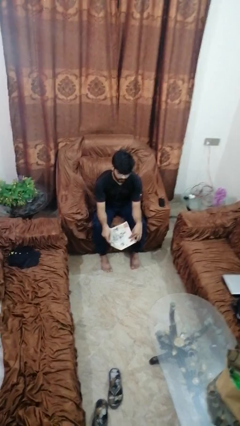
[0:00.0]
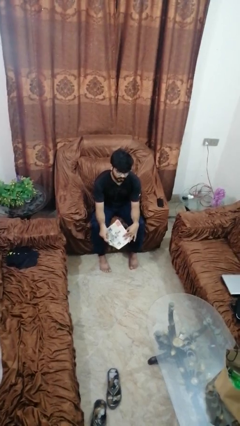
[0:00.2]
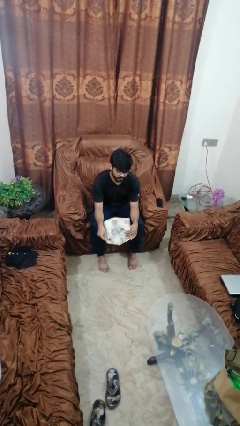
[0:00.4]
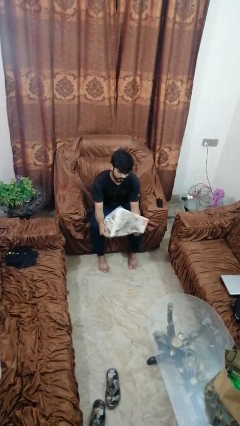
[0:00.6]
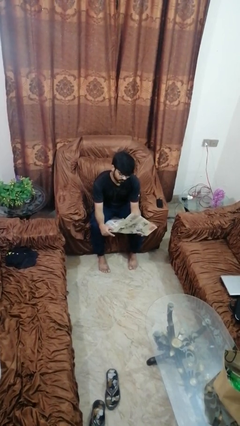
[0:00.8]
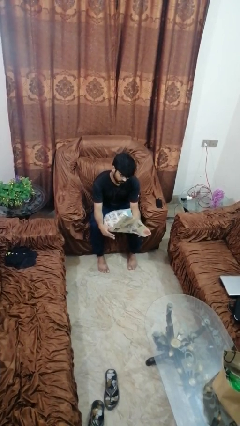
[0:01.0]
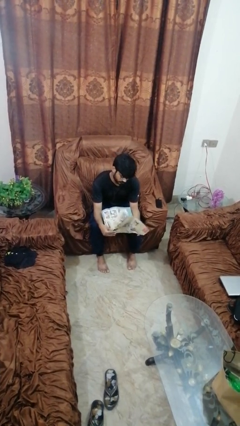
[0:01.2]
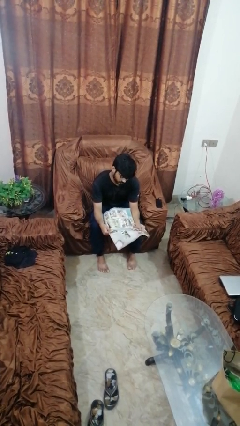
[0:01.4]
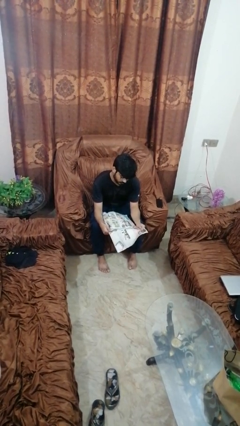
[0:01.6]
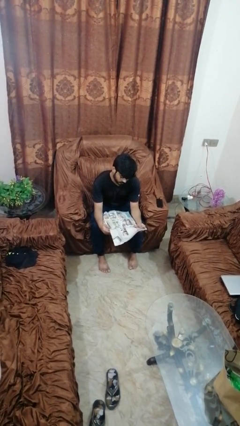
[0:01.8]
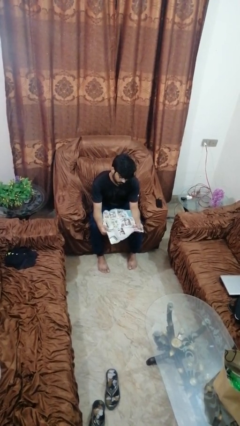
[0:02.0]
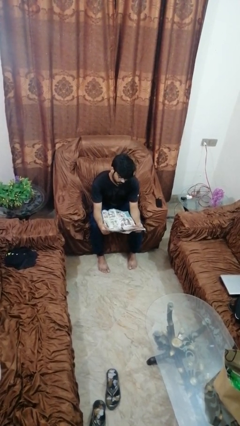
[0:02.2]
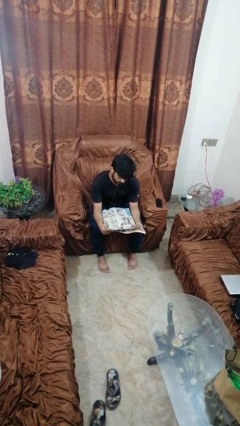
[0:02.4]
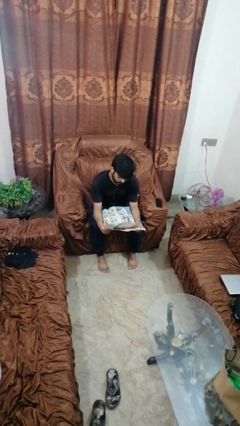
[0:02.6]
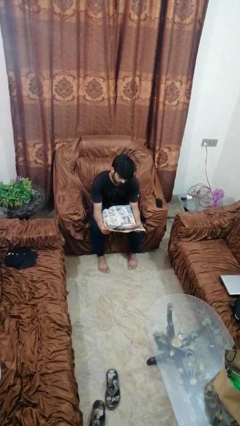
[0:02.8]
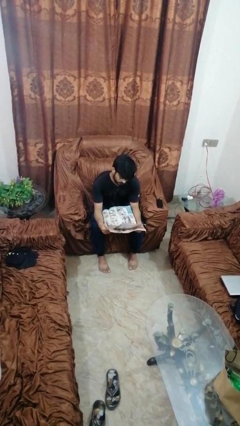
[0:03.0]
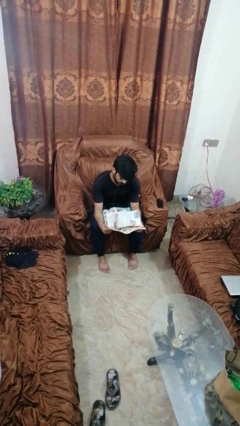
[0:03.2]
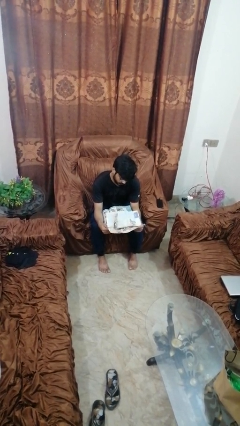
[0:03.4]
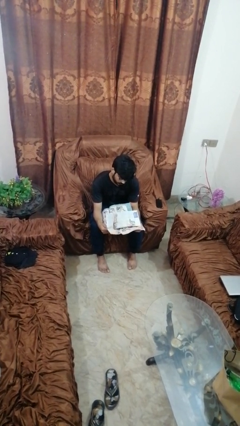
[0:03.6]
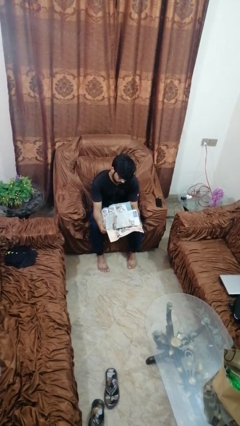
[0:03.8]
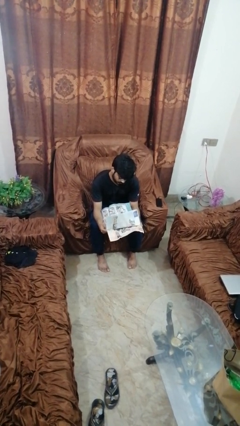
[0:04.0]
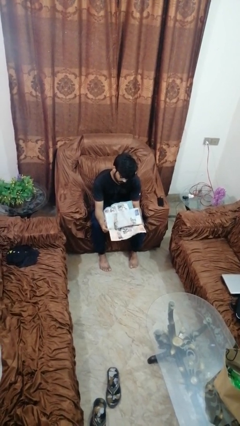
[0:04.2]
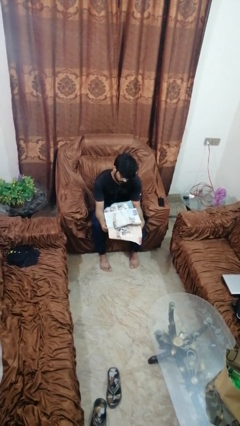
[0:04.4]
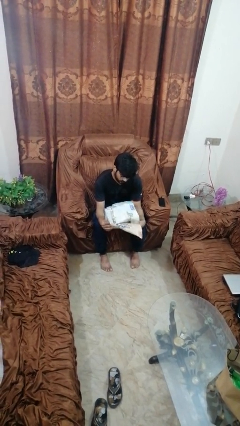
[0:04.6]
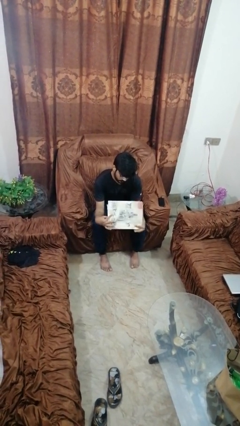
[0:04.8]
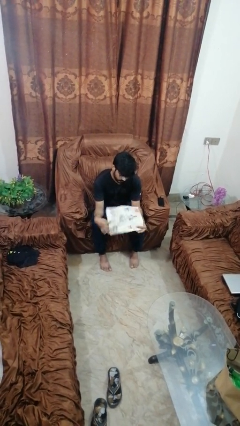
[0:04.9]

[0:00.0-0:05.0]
person reads newspaper

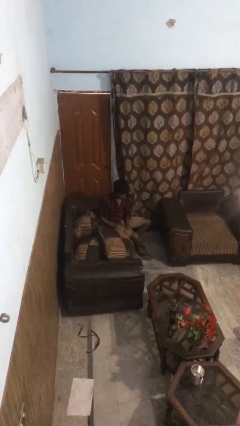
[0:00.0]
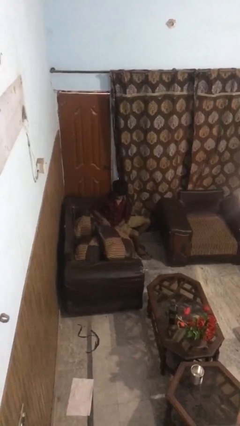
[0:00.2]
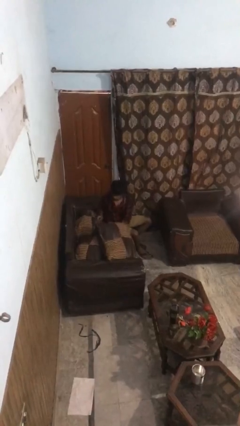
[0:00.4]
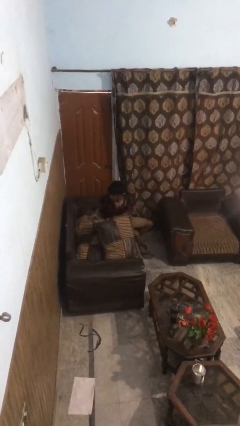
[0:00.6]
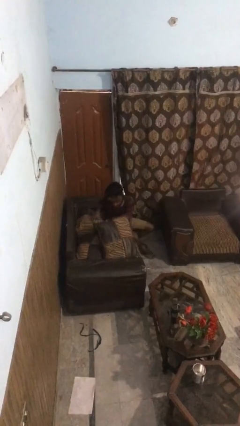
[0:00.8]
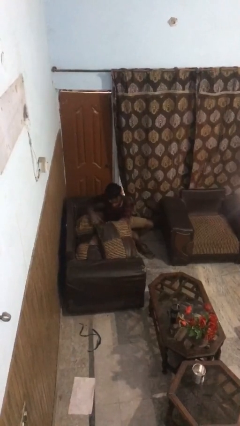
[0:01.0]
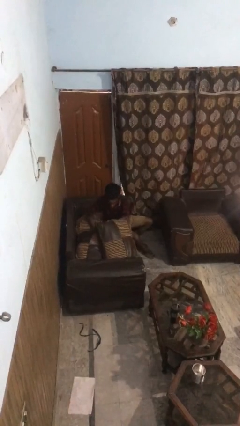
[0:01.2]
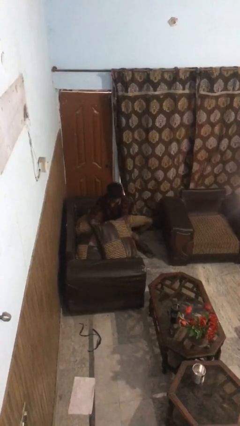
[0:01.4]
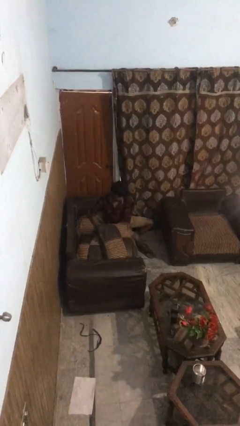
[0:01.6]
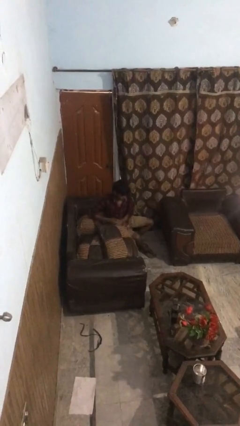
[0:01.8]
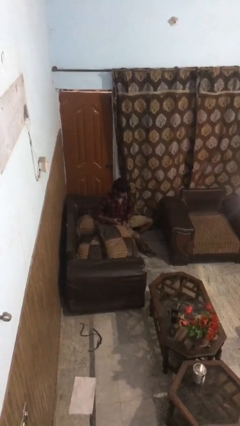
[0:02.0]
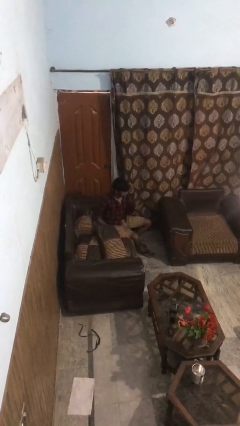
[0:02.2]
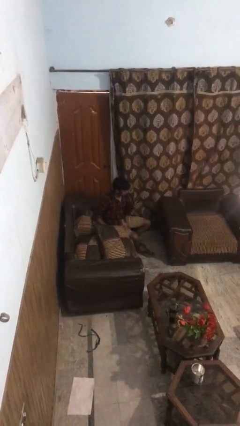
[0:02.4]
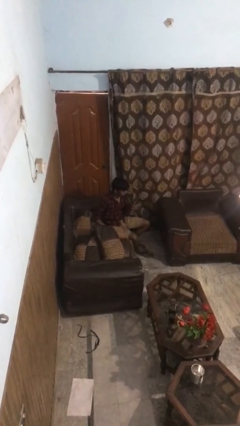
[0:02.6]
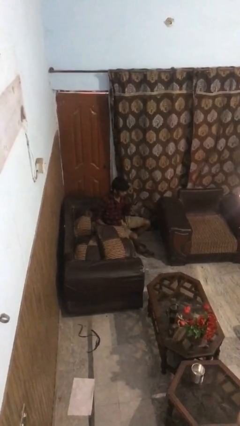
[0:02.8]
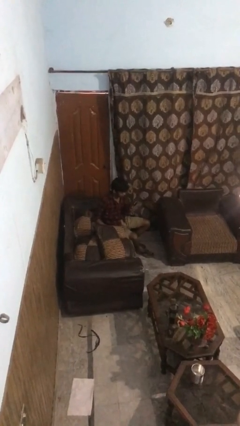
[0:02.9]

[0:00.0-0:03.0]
person searches in couch

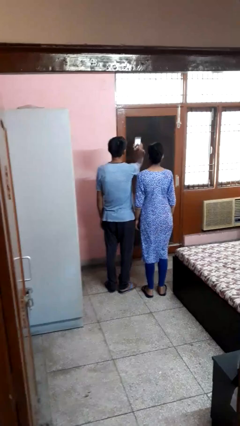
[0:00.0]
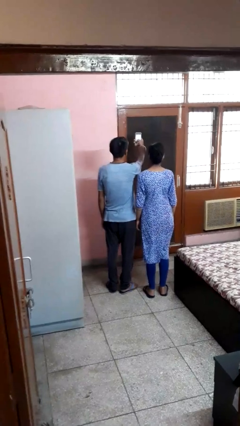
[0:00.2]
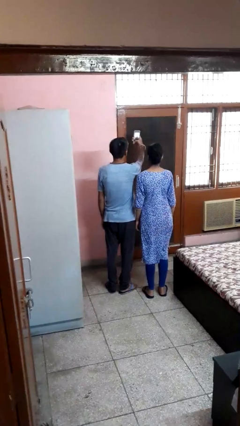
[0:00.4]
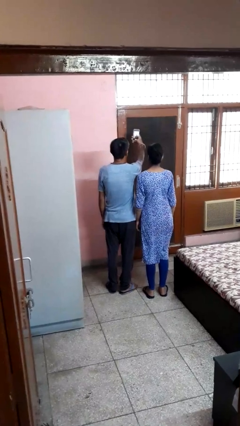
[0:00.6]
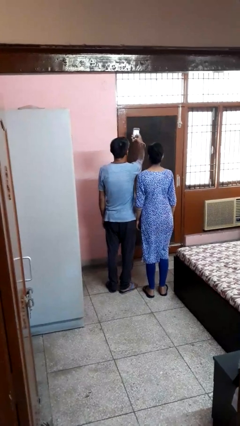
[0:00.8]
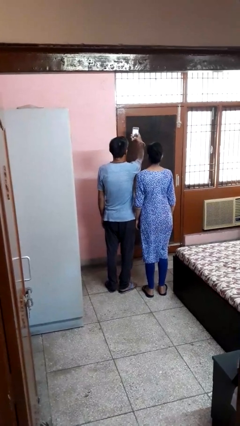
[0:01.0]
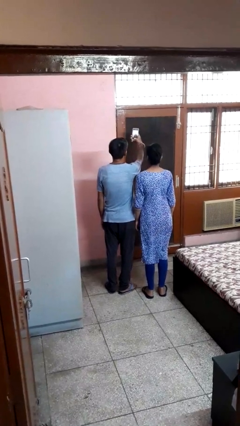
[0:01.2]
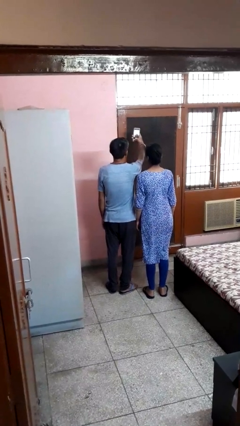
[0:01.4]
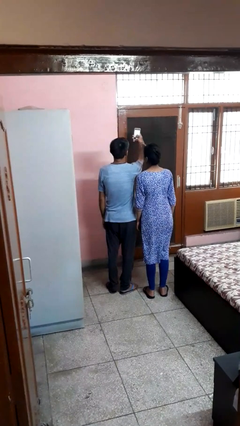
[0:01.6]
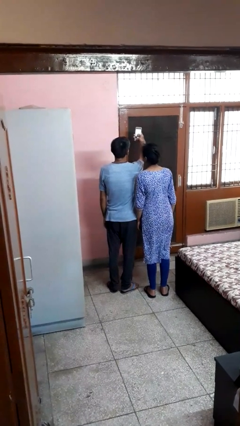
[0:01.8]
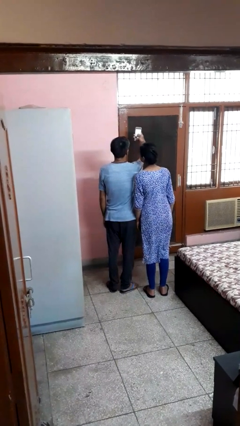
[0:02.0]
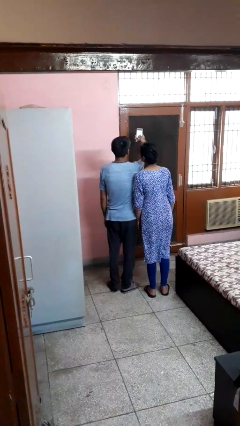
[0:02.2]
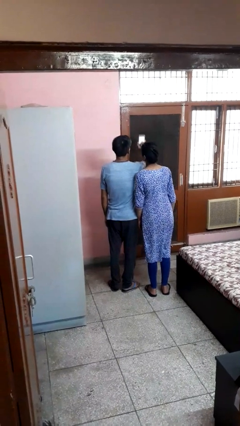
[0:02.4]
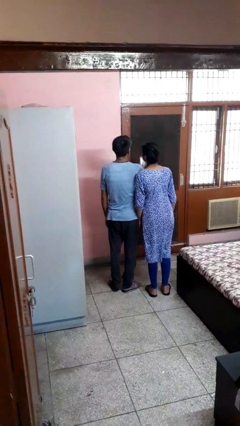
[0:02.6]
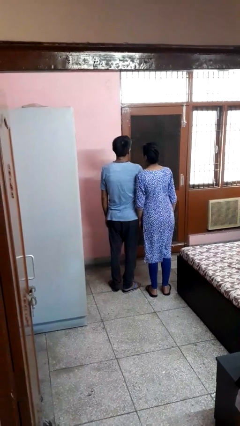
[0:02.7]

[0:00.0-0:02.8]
person takes selfie with person

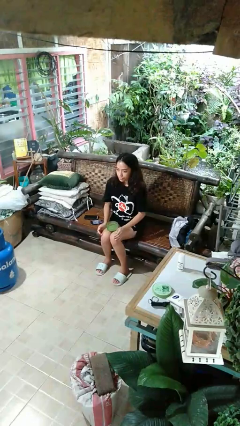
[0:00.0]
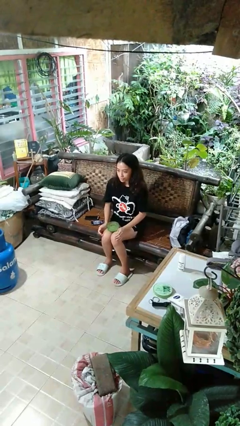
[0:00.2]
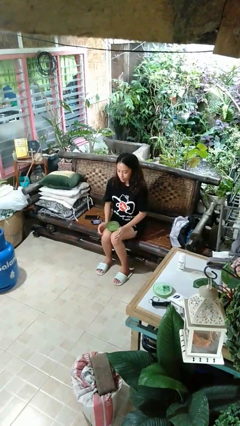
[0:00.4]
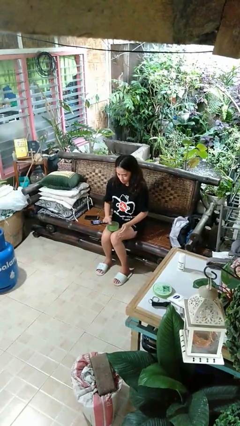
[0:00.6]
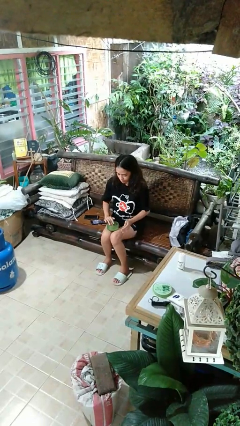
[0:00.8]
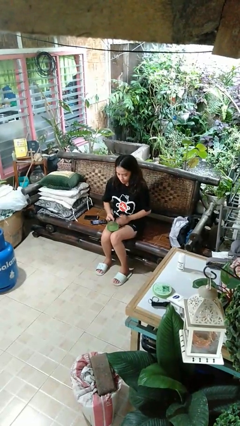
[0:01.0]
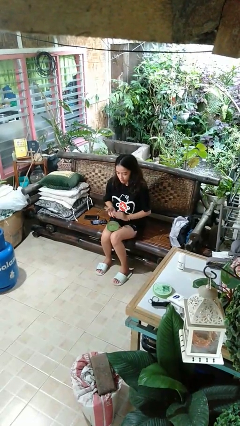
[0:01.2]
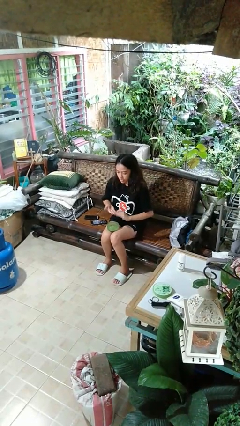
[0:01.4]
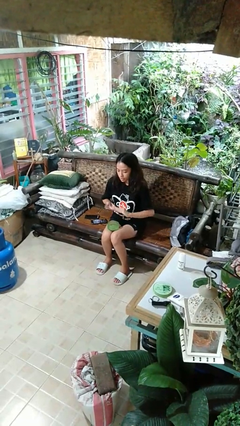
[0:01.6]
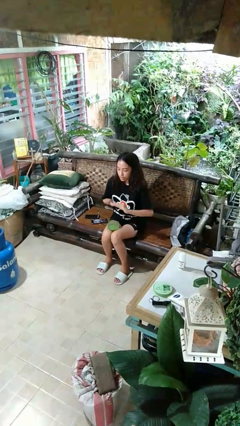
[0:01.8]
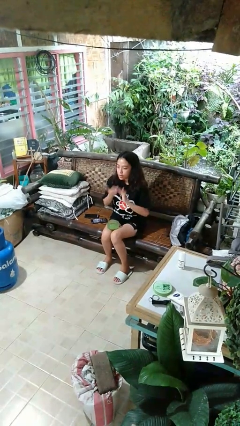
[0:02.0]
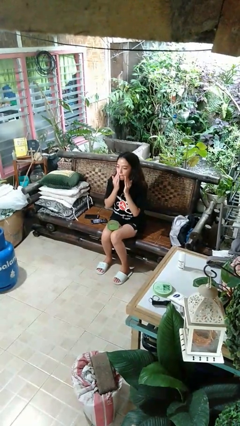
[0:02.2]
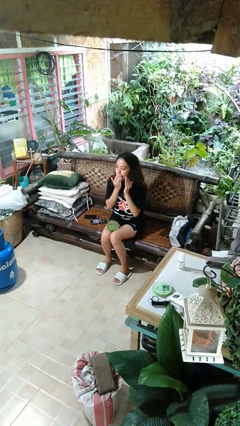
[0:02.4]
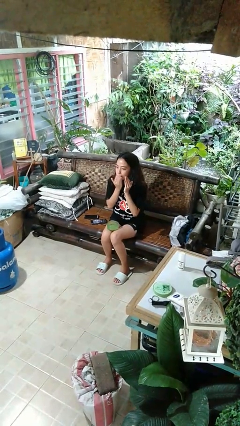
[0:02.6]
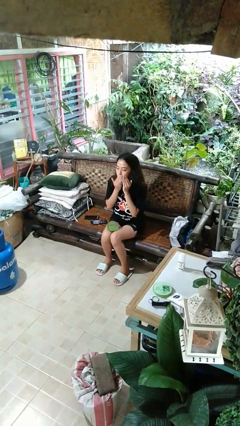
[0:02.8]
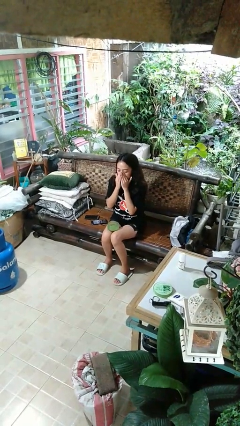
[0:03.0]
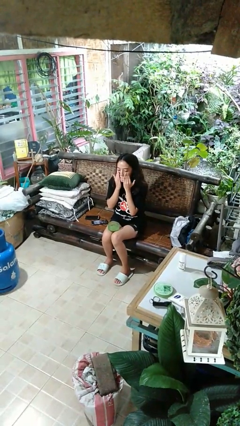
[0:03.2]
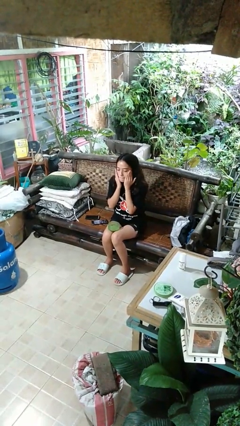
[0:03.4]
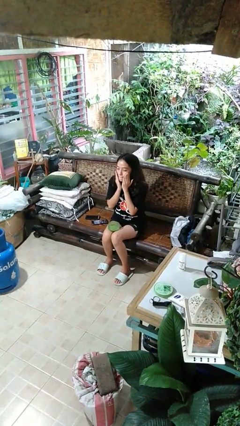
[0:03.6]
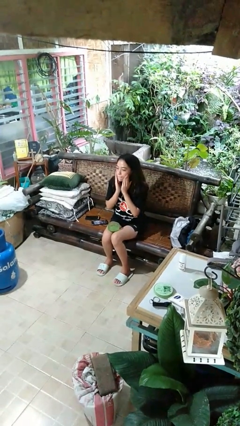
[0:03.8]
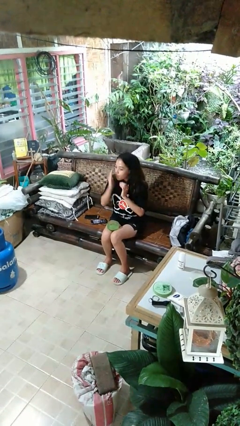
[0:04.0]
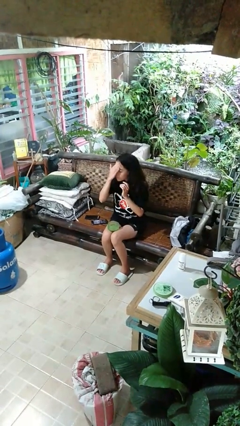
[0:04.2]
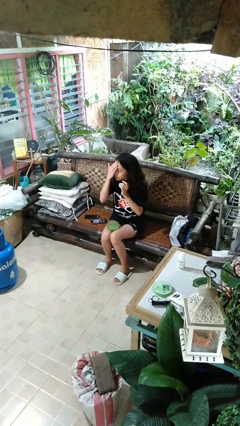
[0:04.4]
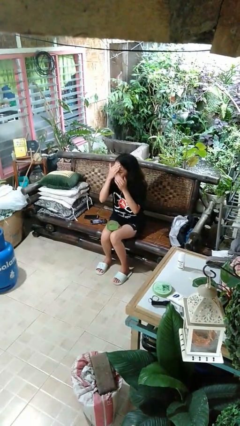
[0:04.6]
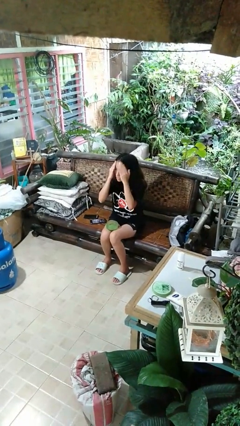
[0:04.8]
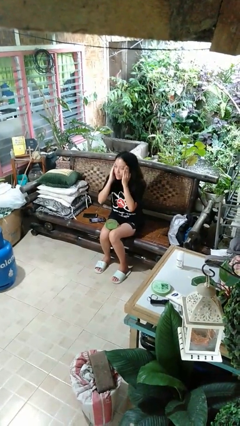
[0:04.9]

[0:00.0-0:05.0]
person applies facial moisturizer

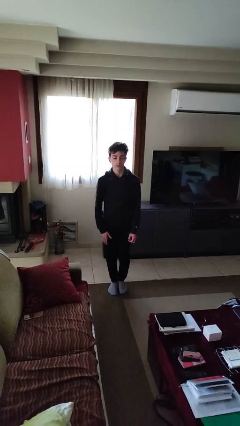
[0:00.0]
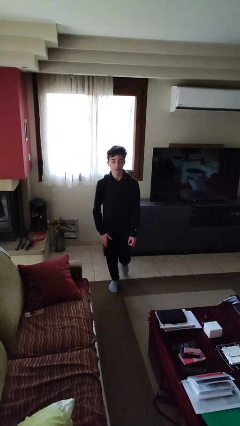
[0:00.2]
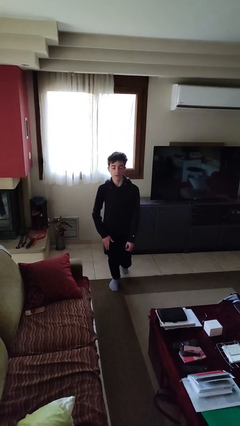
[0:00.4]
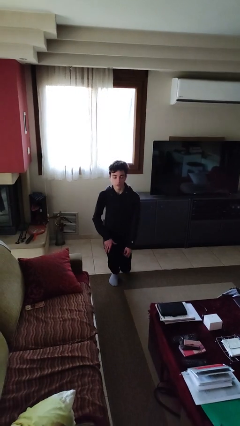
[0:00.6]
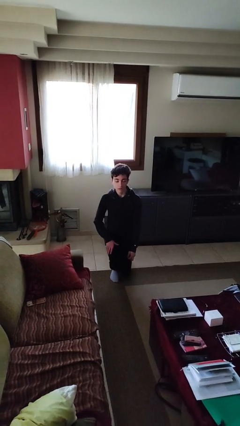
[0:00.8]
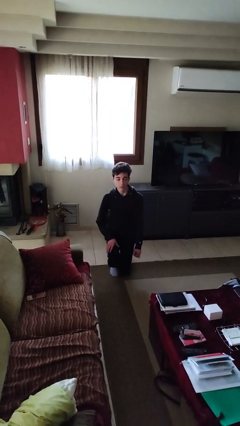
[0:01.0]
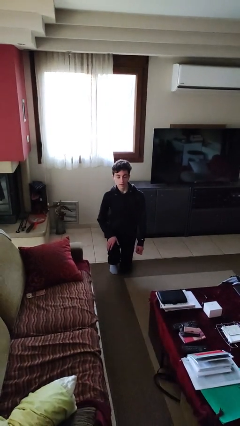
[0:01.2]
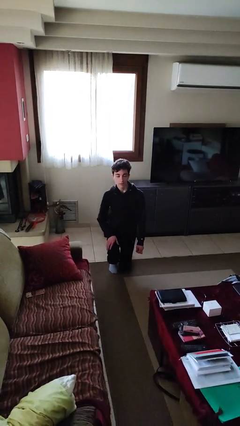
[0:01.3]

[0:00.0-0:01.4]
person kneels

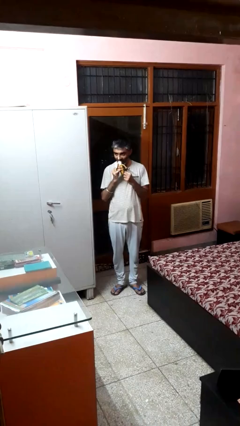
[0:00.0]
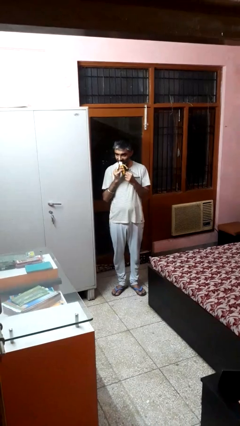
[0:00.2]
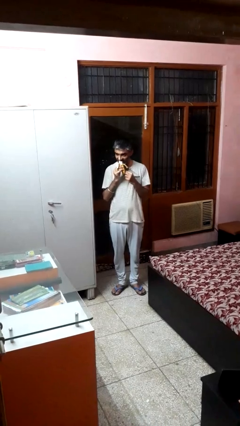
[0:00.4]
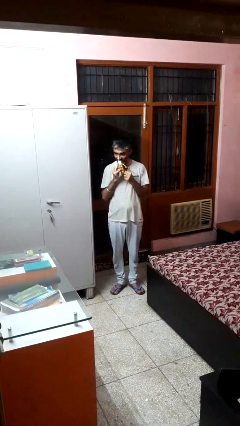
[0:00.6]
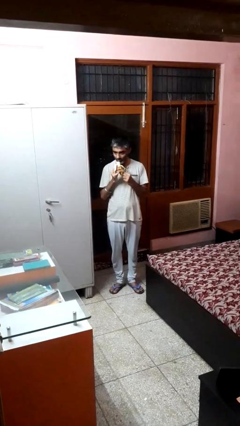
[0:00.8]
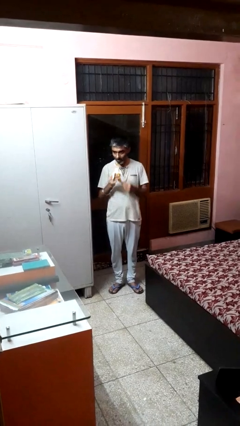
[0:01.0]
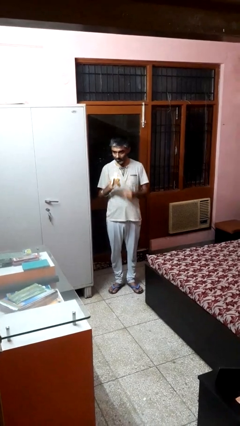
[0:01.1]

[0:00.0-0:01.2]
person eats banana
